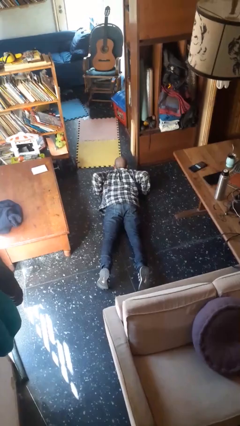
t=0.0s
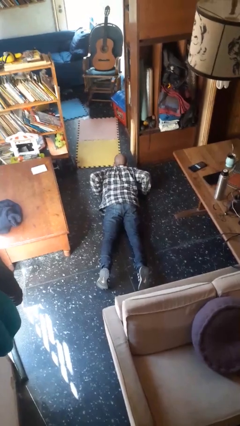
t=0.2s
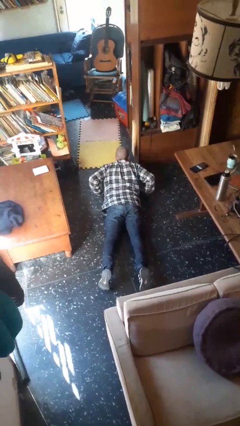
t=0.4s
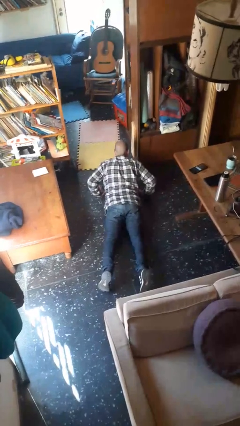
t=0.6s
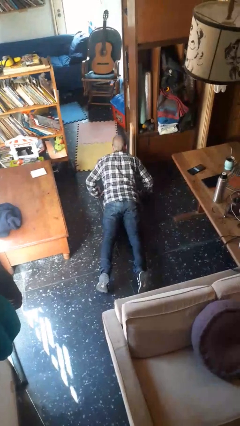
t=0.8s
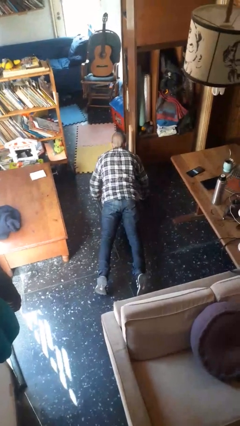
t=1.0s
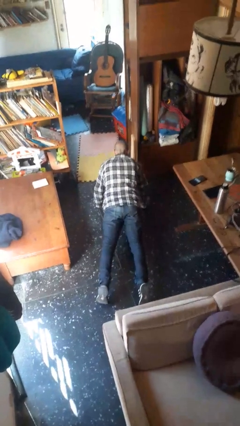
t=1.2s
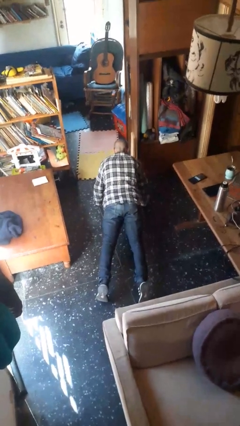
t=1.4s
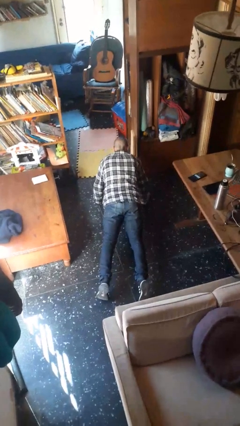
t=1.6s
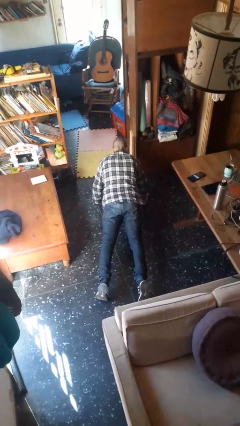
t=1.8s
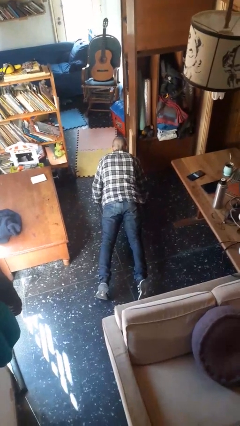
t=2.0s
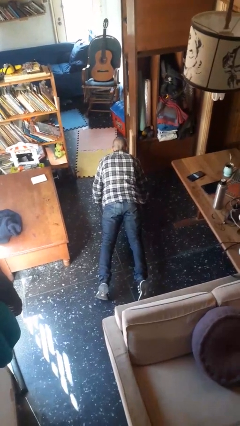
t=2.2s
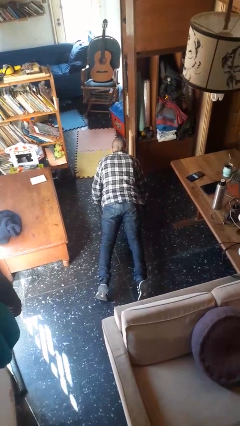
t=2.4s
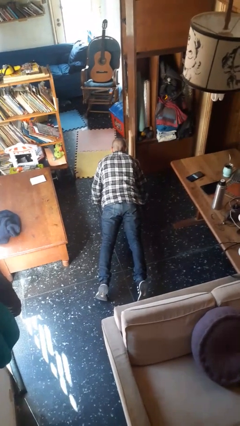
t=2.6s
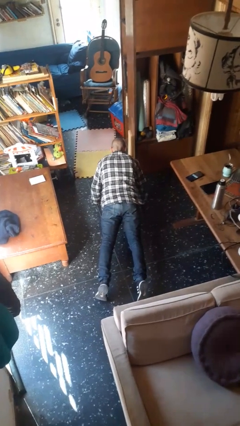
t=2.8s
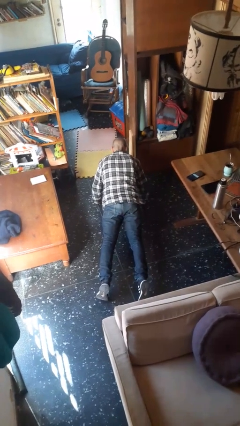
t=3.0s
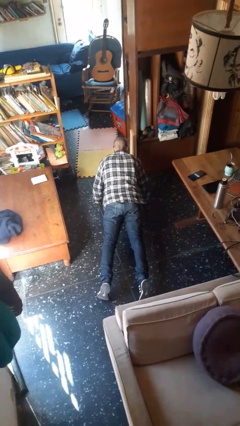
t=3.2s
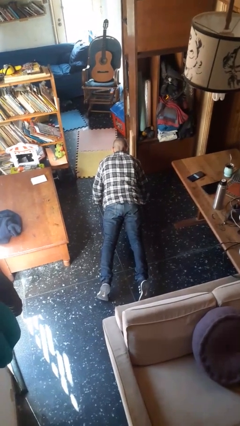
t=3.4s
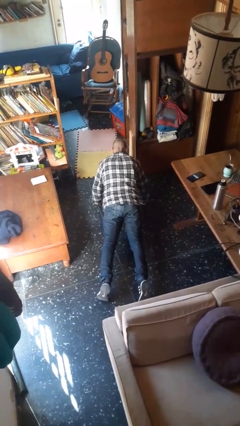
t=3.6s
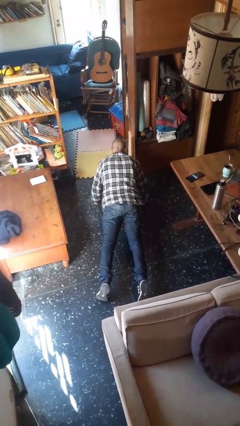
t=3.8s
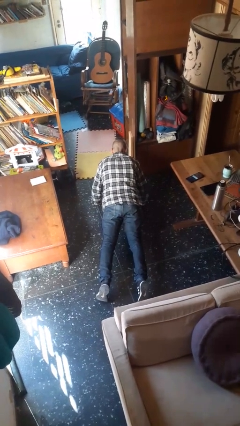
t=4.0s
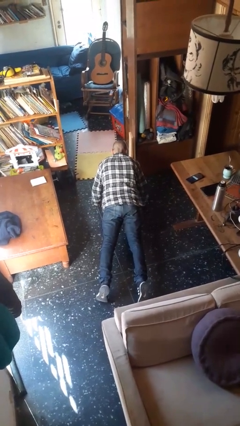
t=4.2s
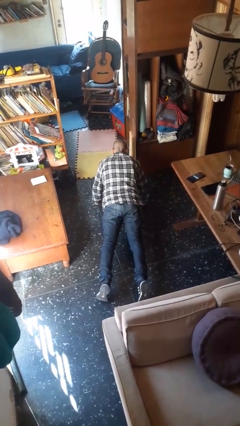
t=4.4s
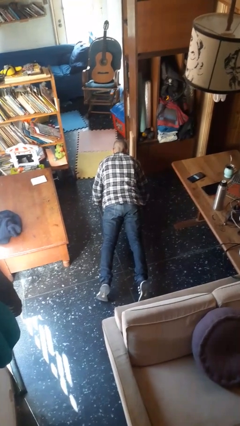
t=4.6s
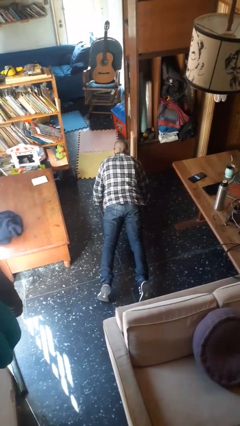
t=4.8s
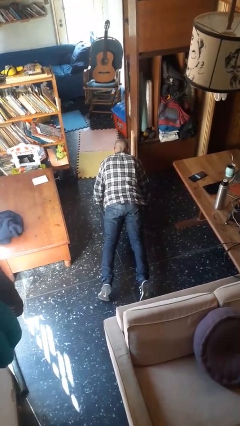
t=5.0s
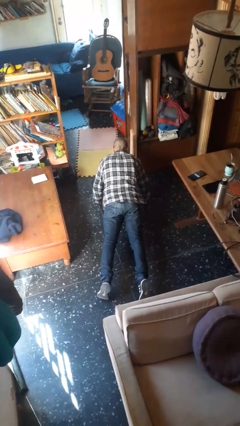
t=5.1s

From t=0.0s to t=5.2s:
person exercises with pushup

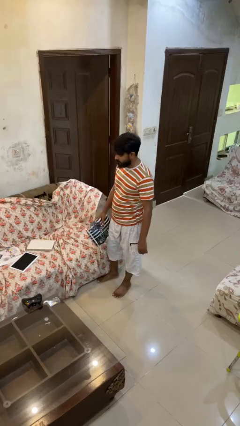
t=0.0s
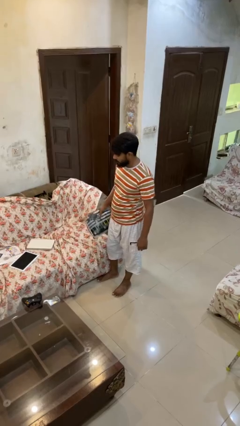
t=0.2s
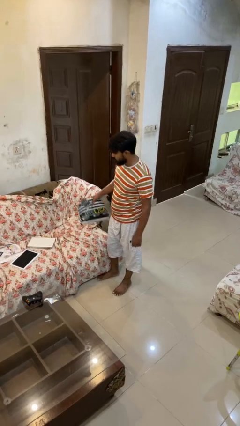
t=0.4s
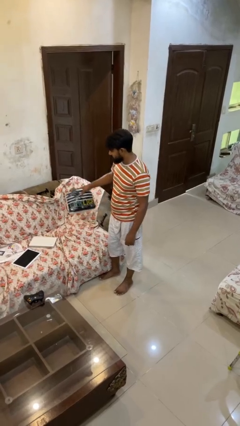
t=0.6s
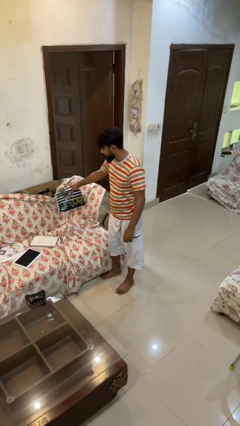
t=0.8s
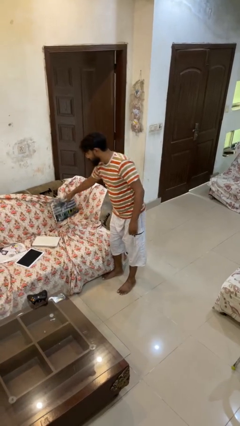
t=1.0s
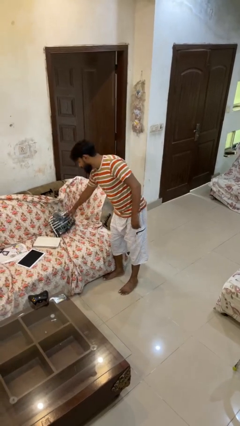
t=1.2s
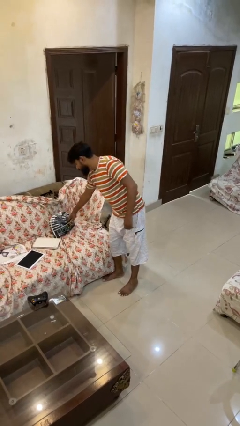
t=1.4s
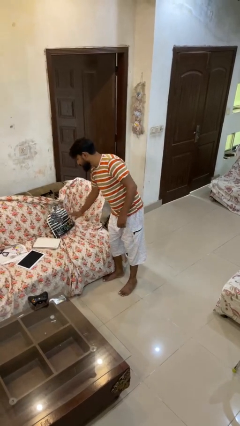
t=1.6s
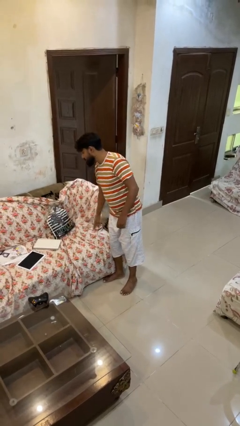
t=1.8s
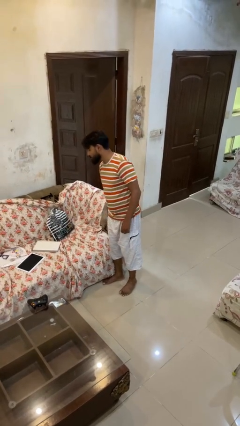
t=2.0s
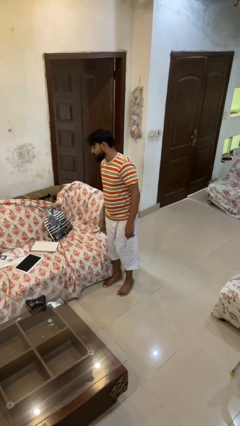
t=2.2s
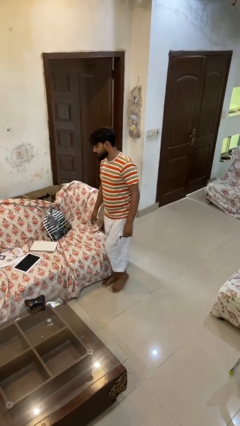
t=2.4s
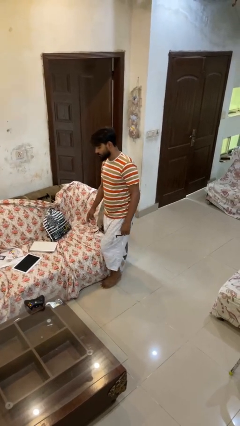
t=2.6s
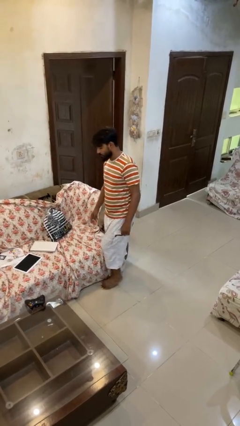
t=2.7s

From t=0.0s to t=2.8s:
person puts down object on couch

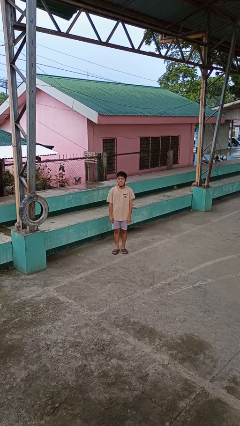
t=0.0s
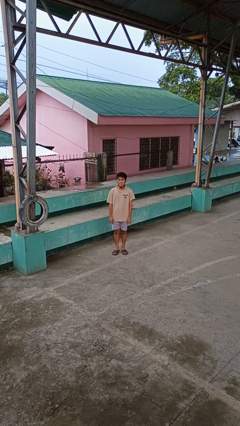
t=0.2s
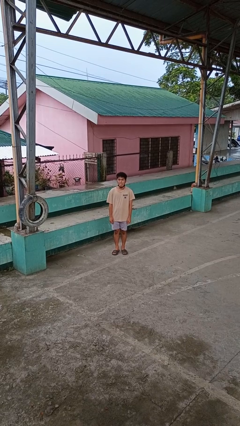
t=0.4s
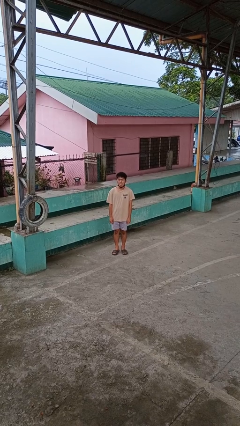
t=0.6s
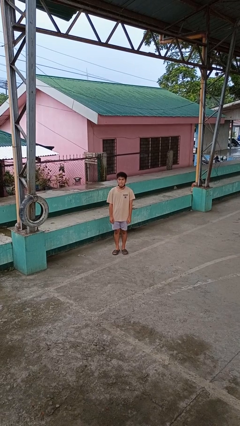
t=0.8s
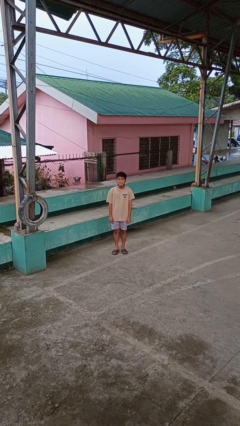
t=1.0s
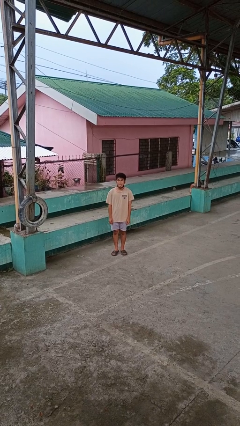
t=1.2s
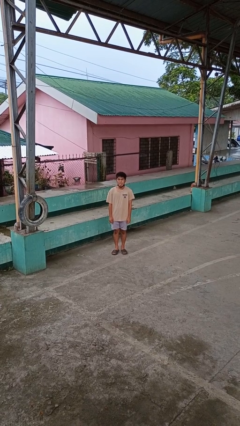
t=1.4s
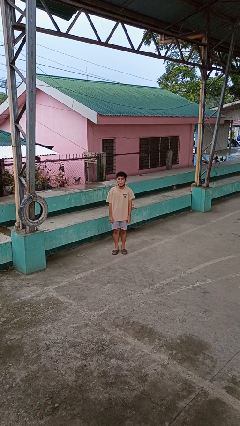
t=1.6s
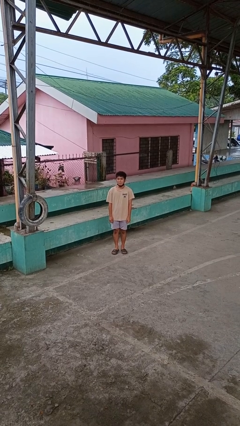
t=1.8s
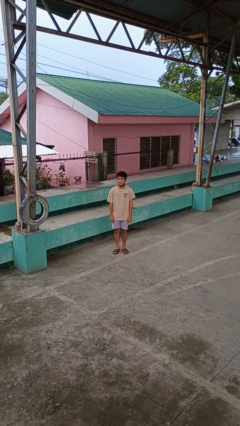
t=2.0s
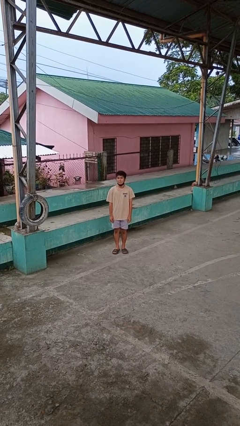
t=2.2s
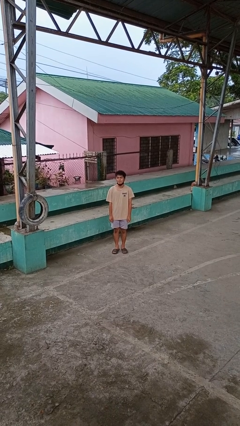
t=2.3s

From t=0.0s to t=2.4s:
person sticks out tongue

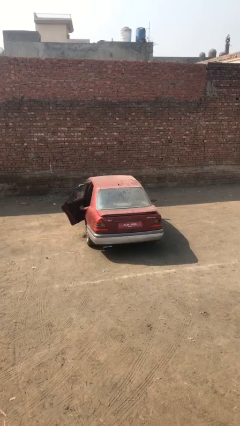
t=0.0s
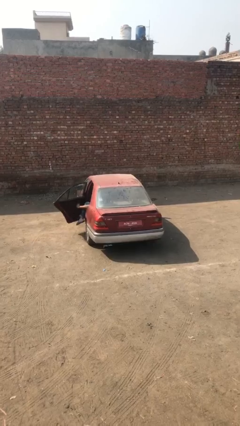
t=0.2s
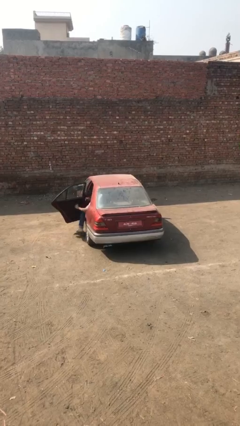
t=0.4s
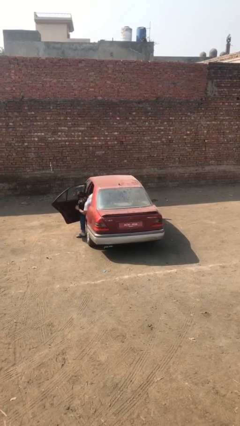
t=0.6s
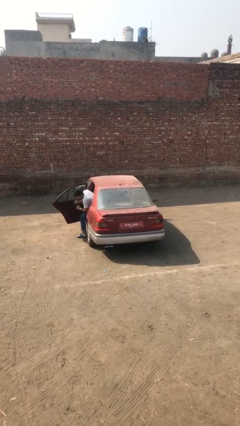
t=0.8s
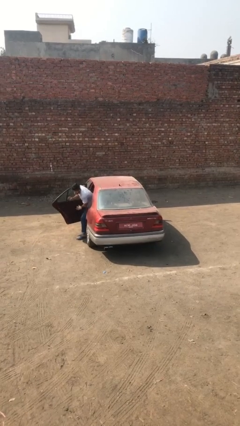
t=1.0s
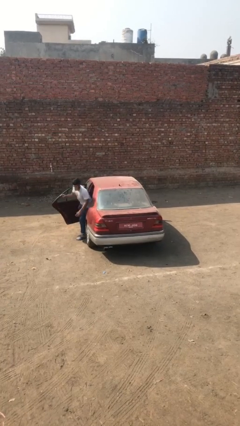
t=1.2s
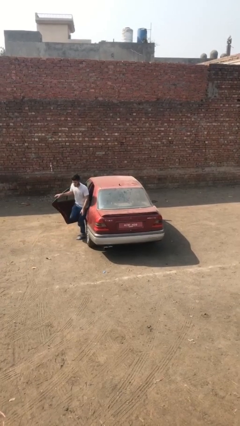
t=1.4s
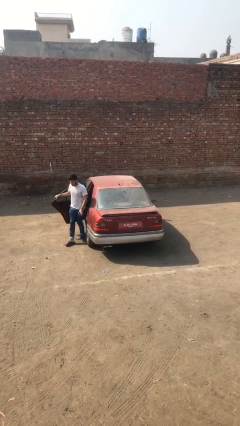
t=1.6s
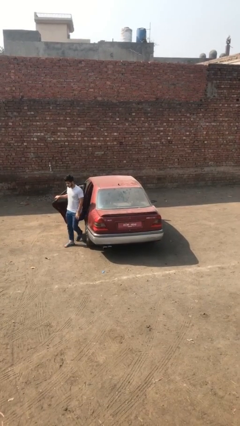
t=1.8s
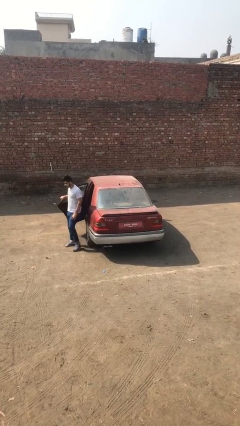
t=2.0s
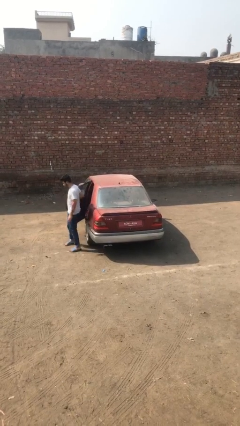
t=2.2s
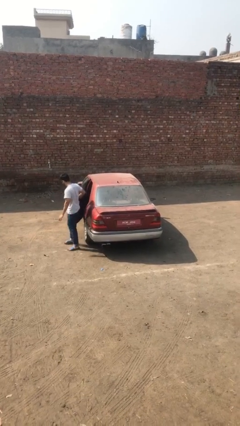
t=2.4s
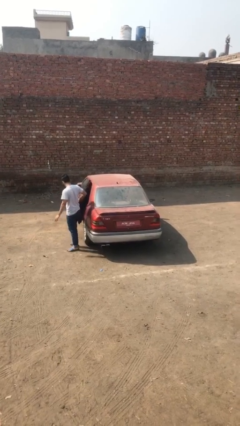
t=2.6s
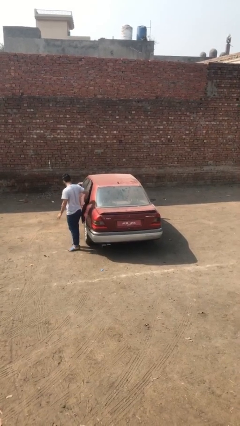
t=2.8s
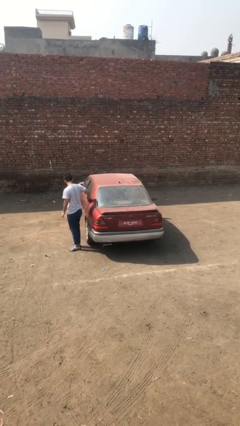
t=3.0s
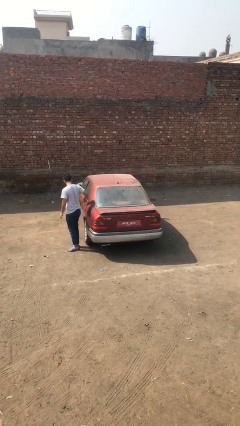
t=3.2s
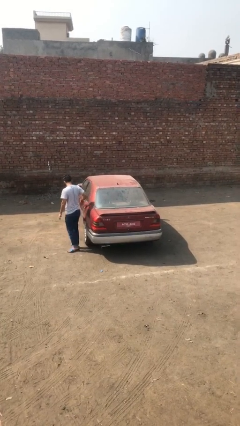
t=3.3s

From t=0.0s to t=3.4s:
car drops off person

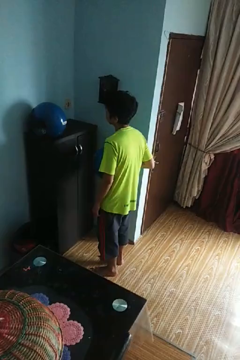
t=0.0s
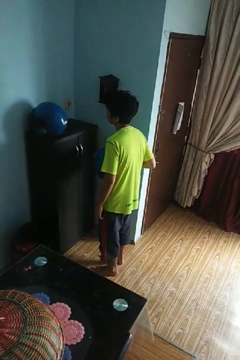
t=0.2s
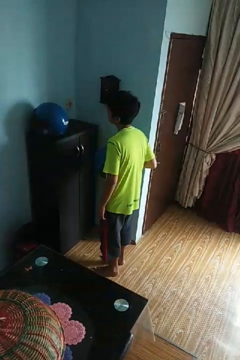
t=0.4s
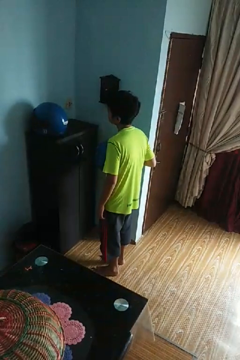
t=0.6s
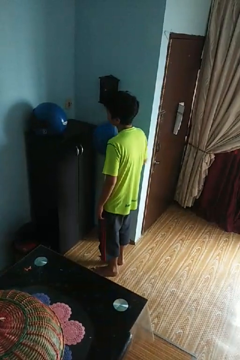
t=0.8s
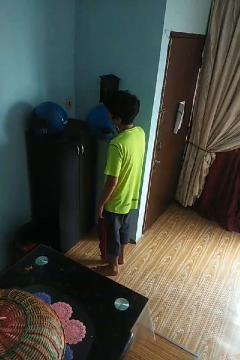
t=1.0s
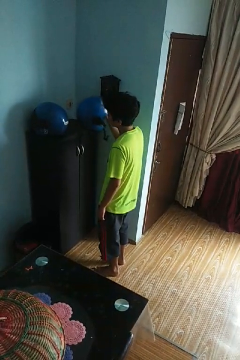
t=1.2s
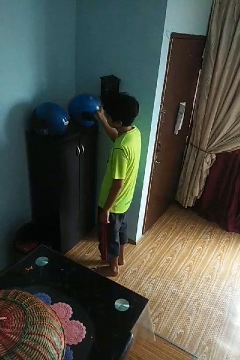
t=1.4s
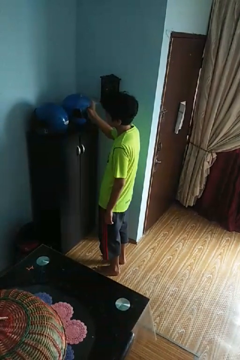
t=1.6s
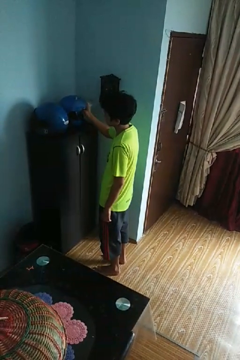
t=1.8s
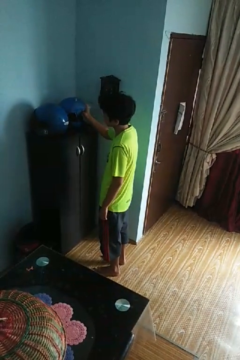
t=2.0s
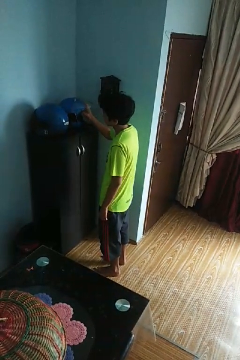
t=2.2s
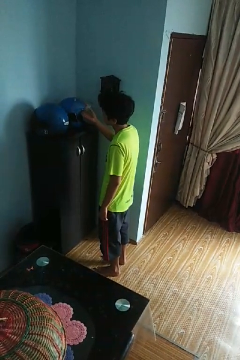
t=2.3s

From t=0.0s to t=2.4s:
person puts down object on countertop

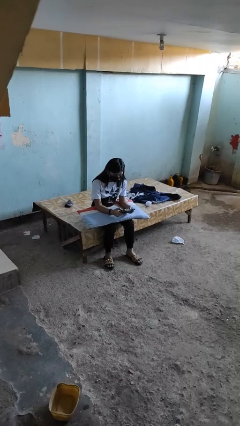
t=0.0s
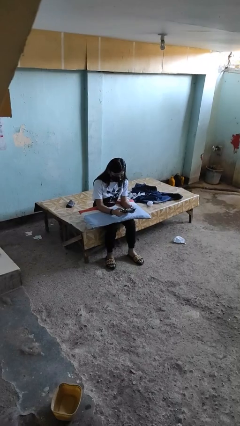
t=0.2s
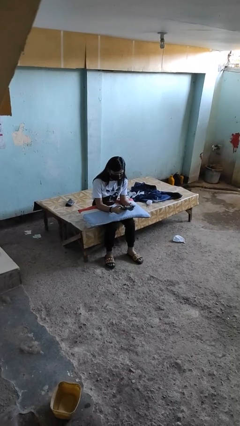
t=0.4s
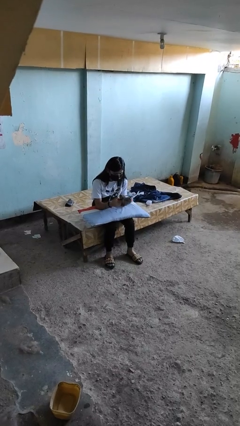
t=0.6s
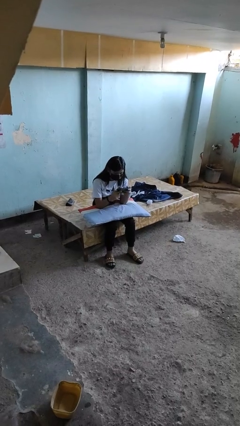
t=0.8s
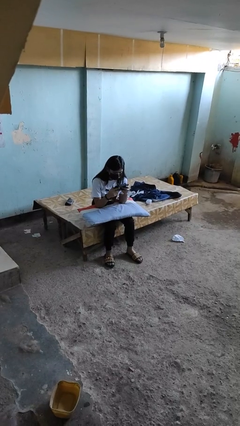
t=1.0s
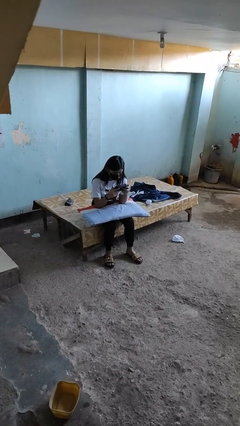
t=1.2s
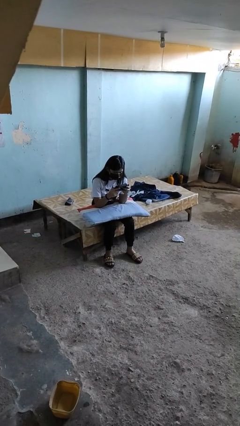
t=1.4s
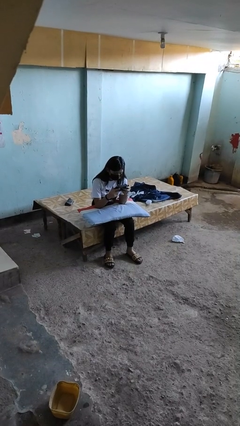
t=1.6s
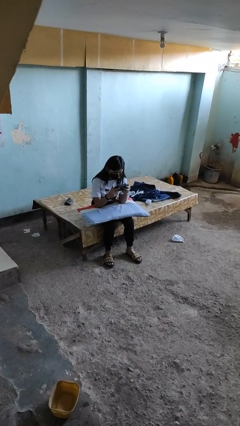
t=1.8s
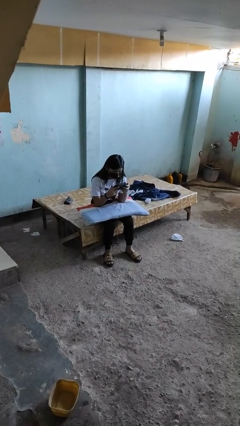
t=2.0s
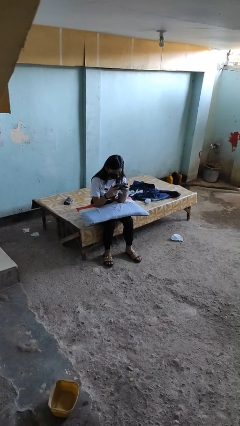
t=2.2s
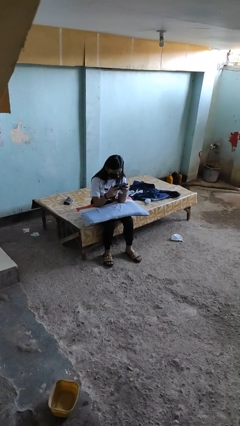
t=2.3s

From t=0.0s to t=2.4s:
person interacts with handheld game
